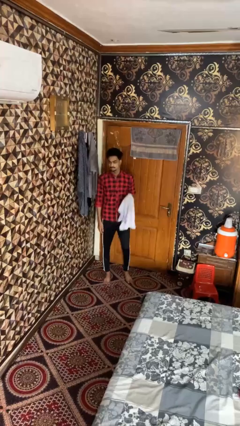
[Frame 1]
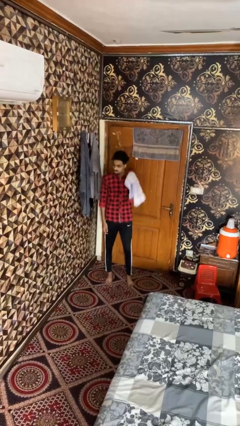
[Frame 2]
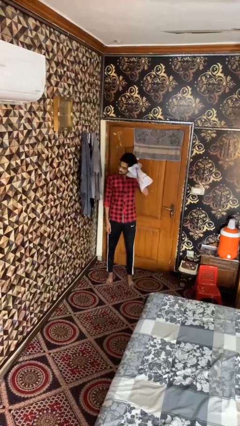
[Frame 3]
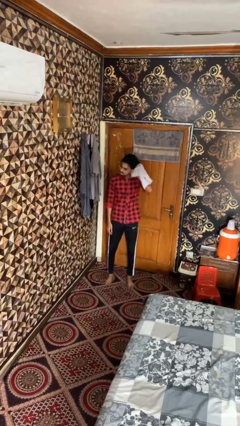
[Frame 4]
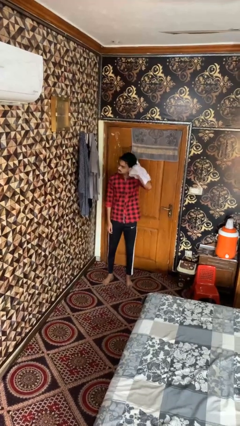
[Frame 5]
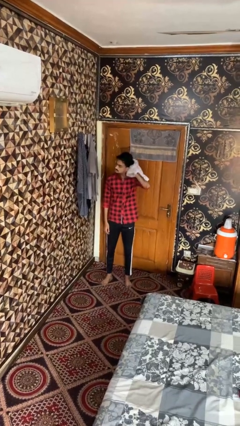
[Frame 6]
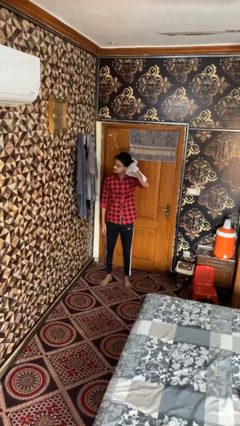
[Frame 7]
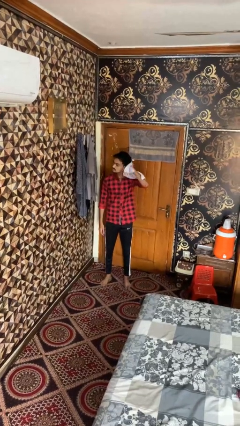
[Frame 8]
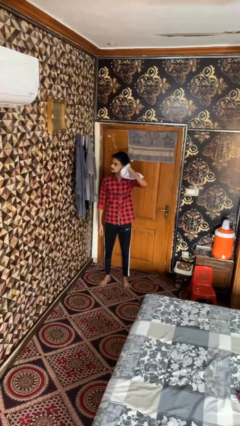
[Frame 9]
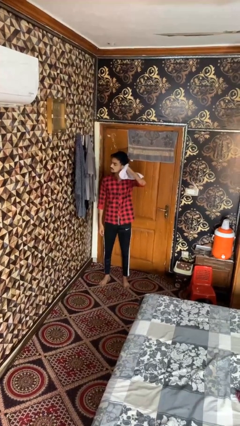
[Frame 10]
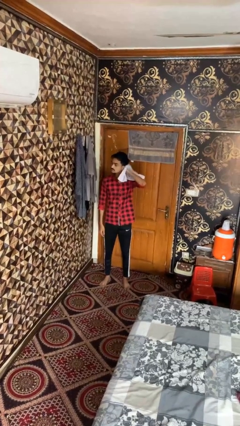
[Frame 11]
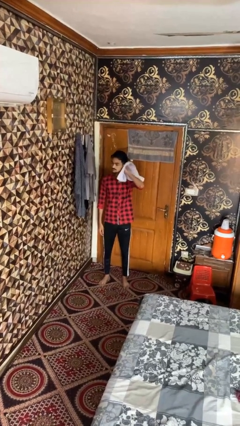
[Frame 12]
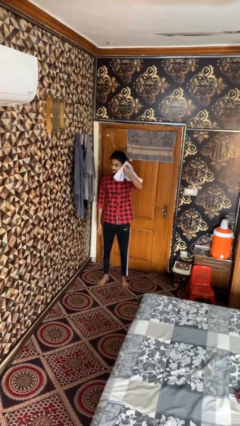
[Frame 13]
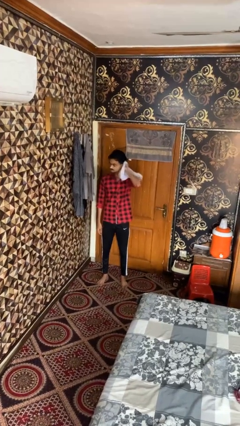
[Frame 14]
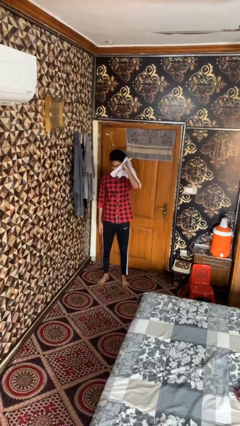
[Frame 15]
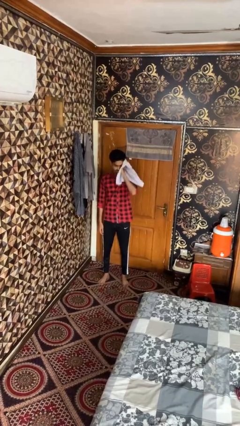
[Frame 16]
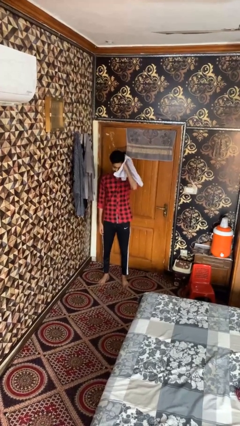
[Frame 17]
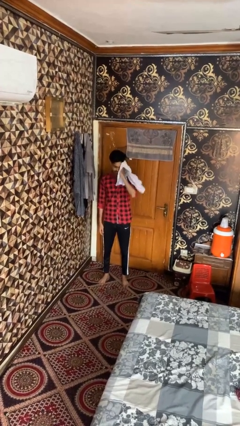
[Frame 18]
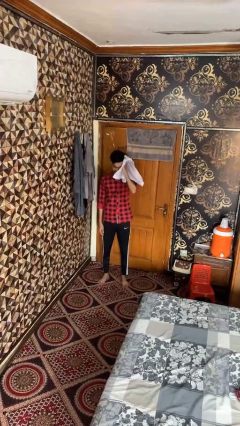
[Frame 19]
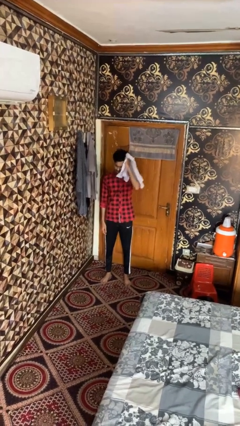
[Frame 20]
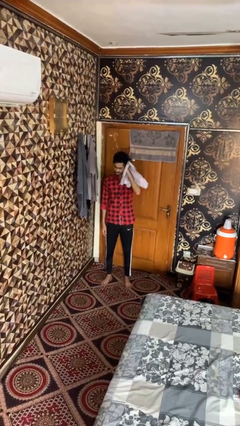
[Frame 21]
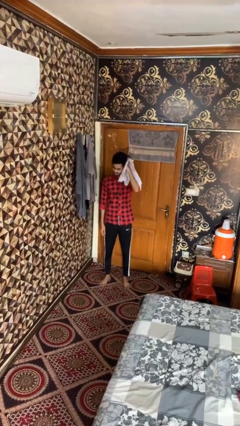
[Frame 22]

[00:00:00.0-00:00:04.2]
person dries hair with towel

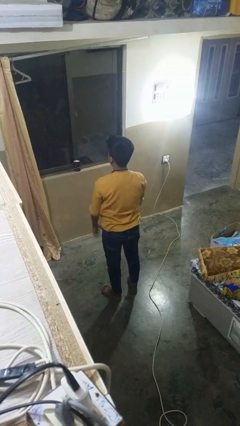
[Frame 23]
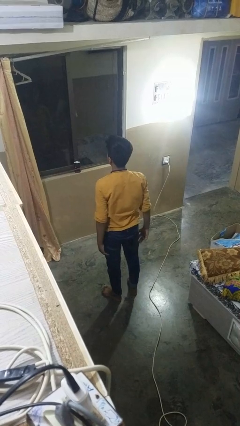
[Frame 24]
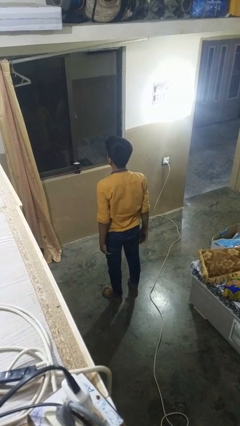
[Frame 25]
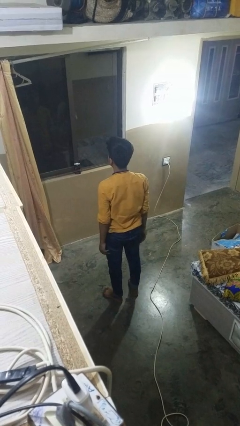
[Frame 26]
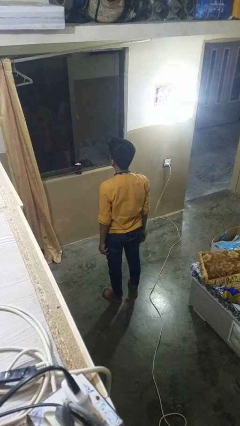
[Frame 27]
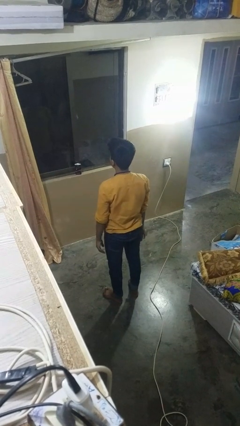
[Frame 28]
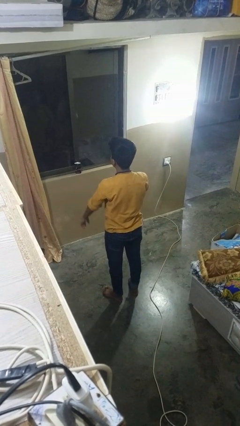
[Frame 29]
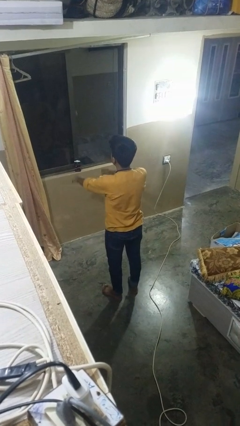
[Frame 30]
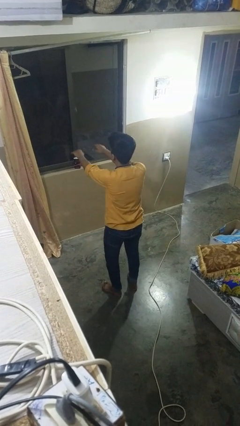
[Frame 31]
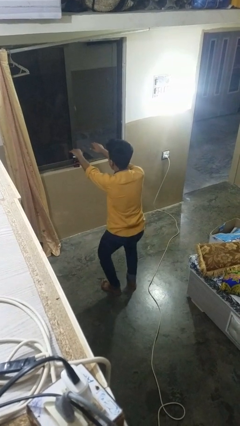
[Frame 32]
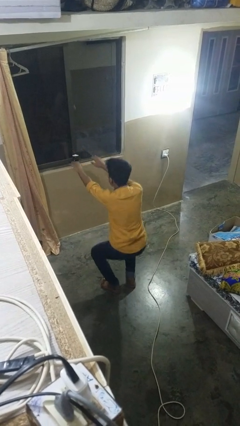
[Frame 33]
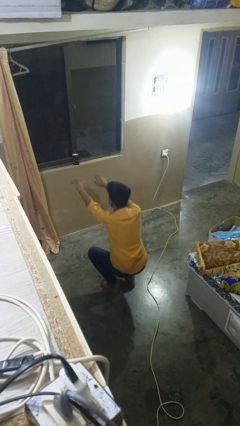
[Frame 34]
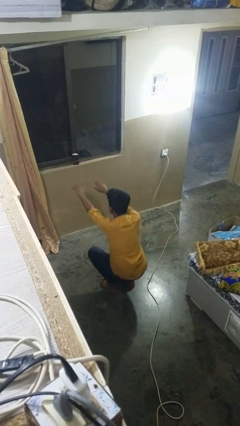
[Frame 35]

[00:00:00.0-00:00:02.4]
person squats

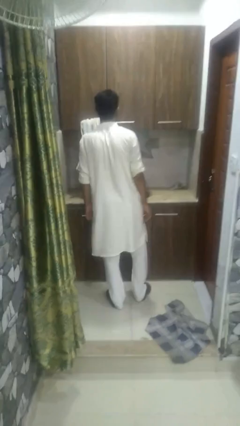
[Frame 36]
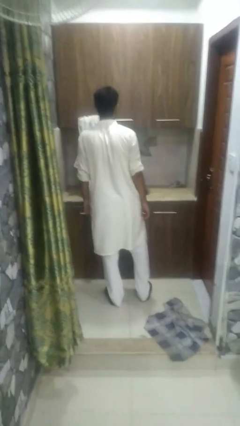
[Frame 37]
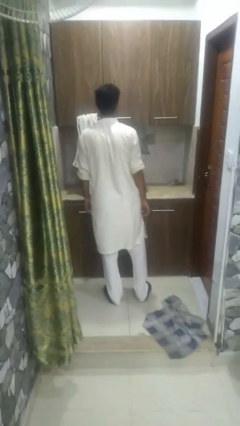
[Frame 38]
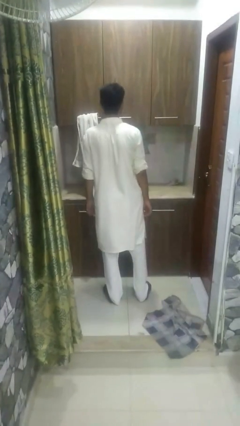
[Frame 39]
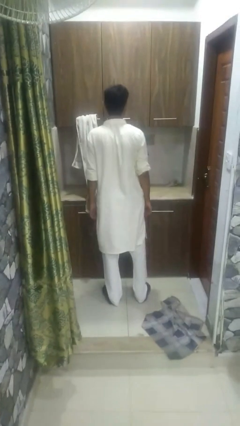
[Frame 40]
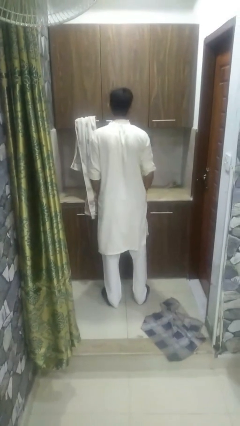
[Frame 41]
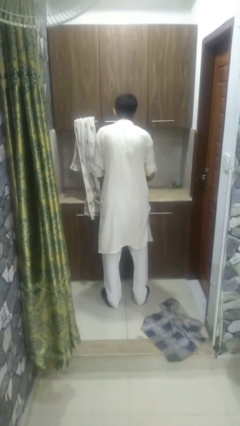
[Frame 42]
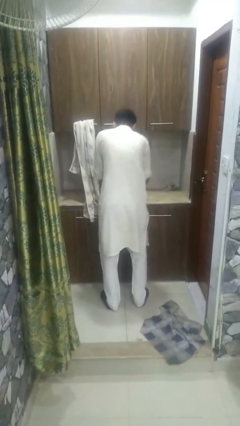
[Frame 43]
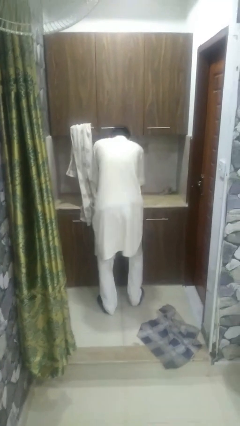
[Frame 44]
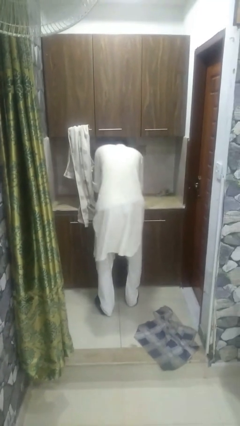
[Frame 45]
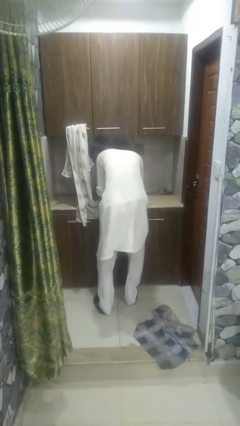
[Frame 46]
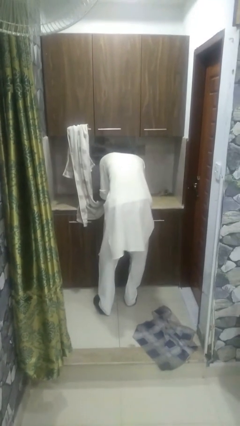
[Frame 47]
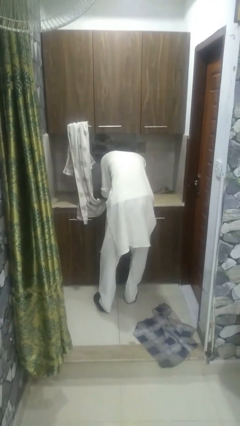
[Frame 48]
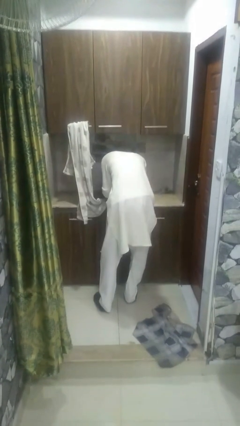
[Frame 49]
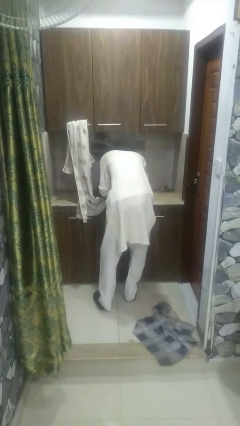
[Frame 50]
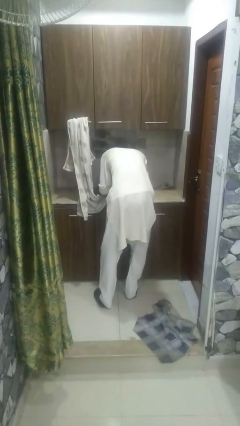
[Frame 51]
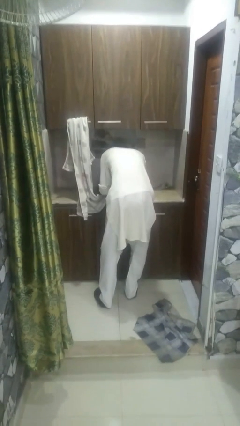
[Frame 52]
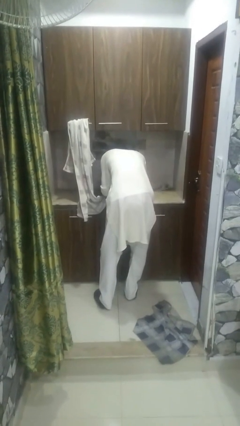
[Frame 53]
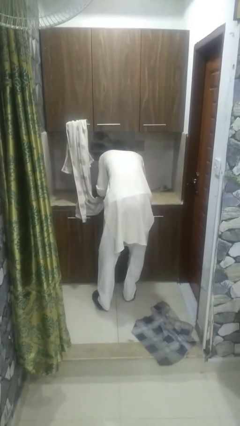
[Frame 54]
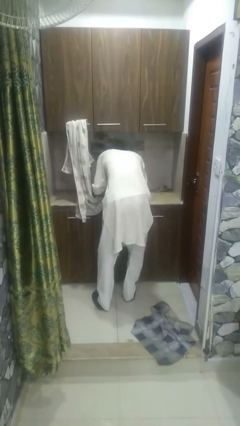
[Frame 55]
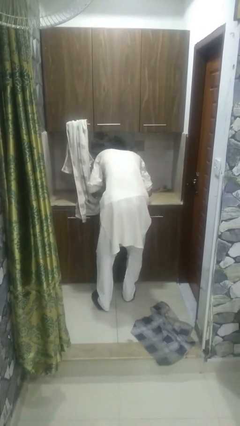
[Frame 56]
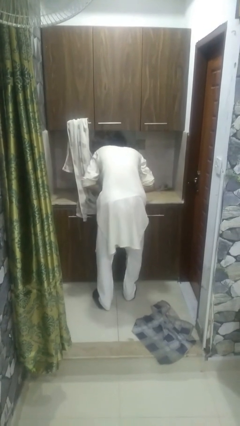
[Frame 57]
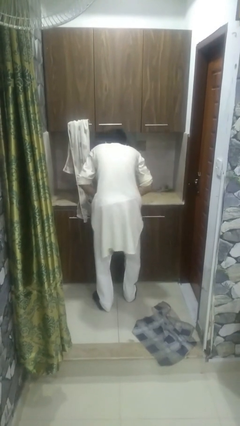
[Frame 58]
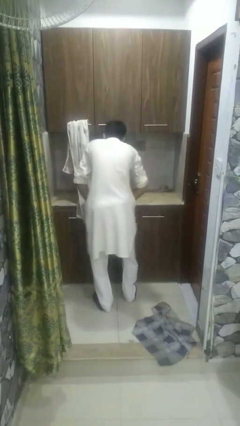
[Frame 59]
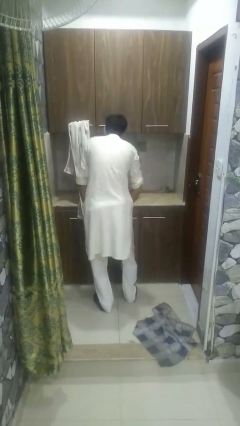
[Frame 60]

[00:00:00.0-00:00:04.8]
person washes face

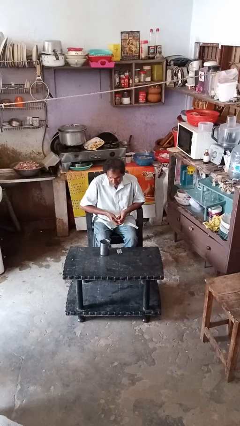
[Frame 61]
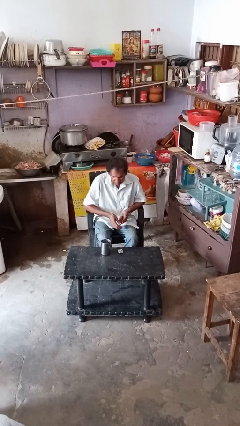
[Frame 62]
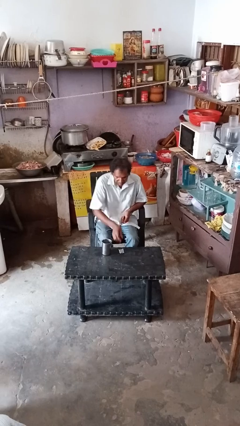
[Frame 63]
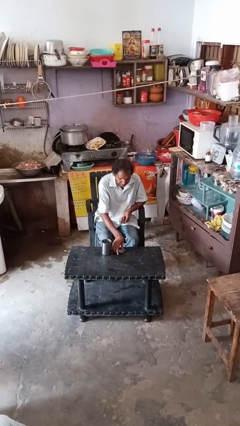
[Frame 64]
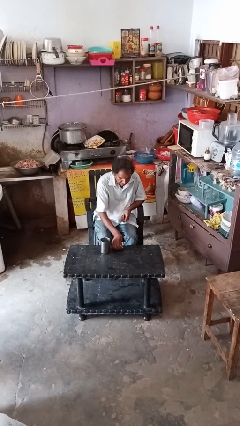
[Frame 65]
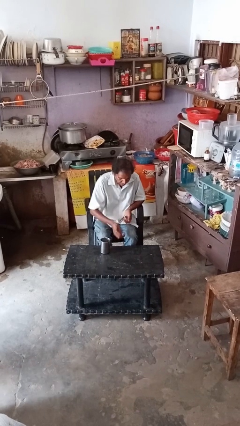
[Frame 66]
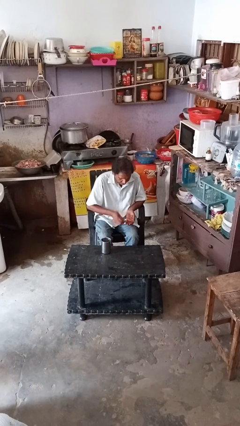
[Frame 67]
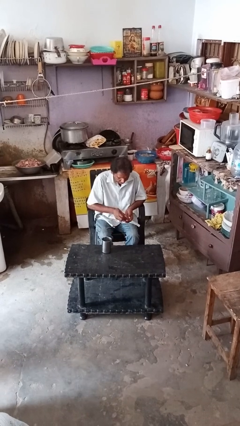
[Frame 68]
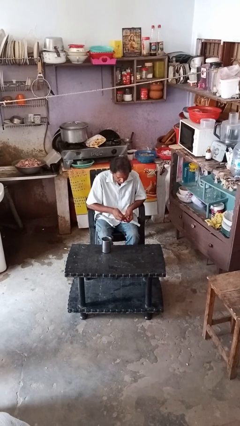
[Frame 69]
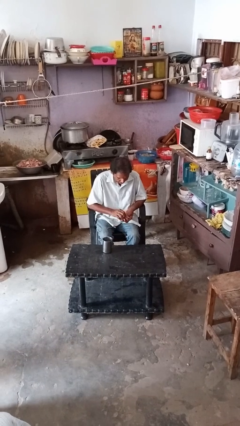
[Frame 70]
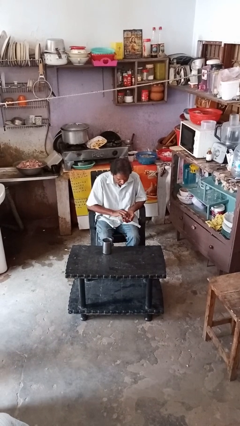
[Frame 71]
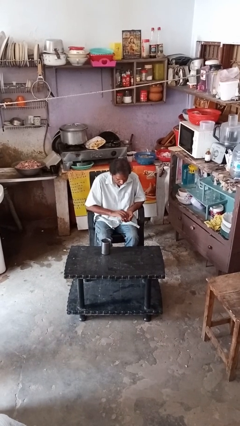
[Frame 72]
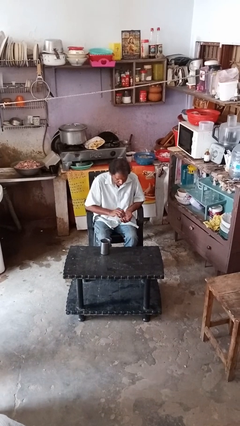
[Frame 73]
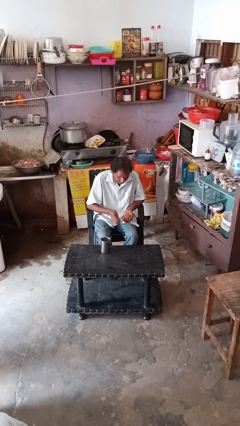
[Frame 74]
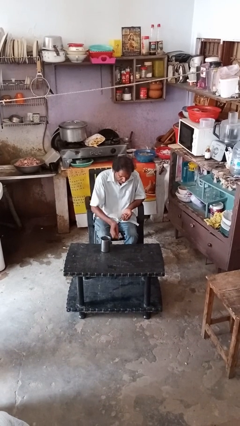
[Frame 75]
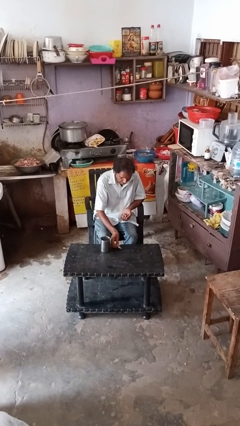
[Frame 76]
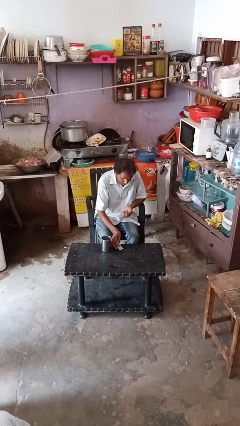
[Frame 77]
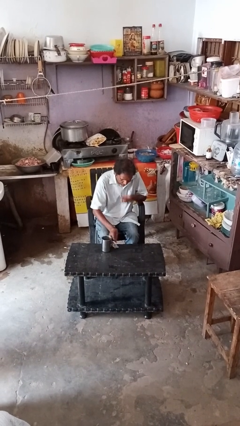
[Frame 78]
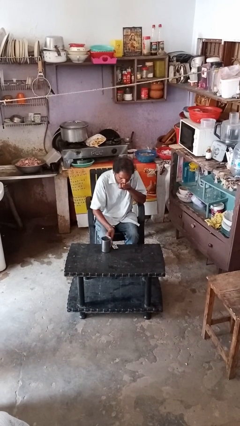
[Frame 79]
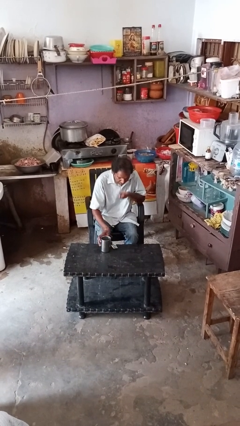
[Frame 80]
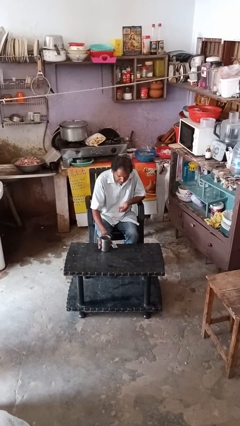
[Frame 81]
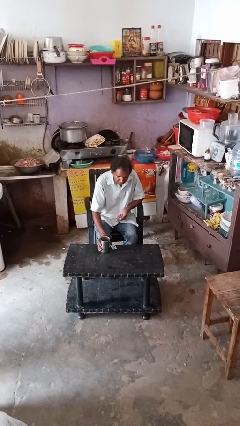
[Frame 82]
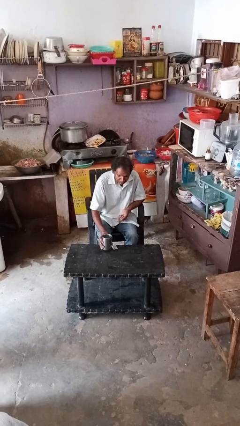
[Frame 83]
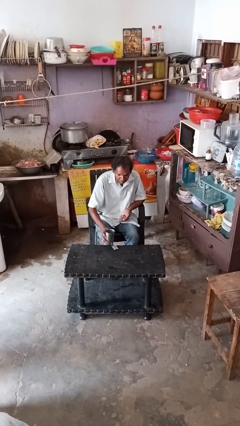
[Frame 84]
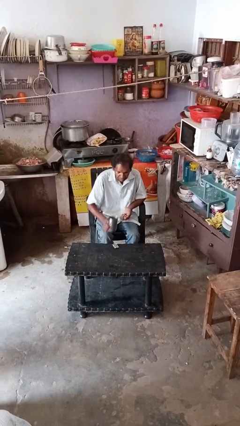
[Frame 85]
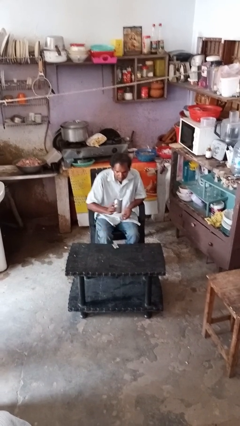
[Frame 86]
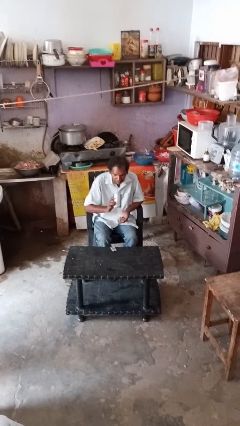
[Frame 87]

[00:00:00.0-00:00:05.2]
person takes medicine pills

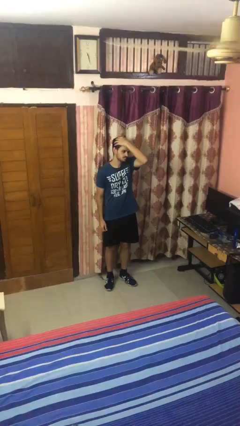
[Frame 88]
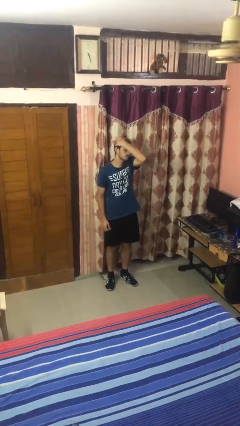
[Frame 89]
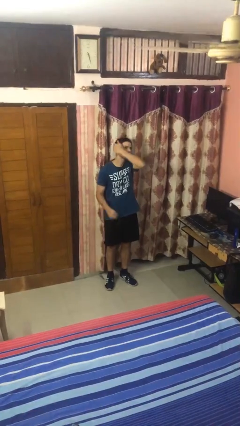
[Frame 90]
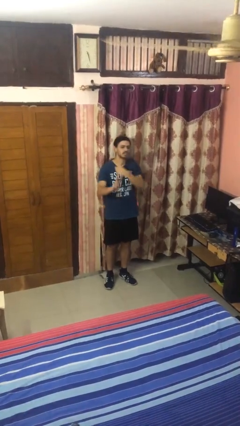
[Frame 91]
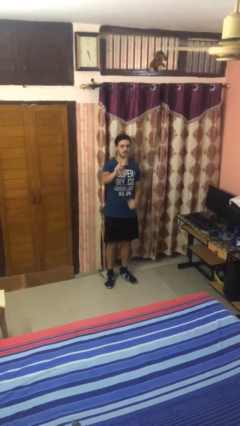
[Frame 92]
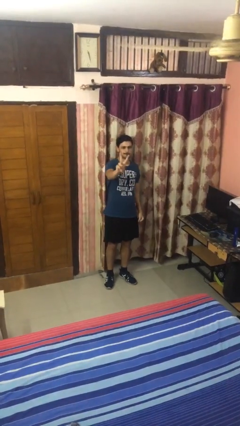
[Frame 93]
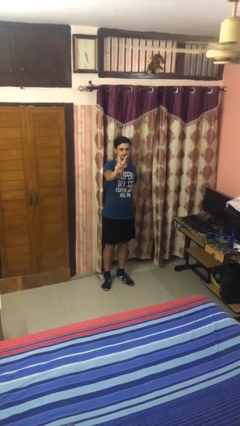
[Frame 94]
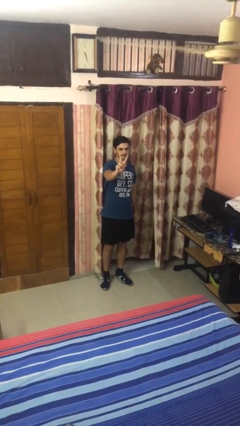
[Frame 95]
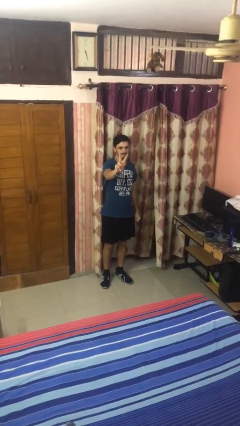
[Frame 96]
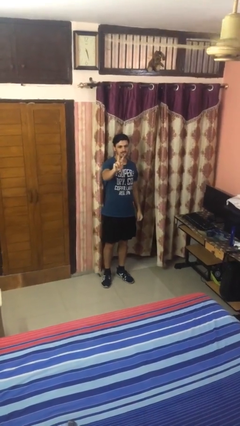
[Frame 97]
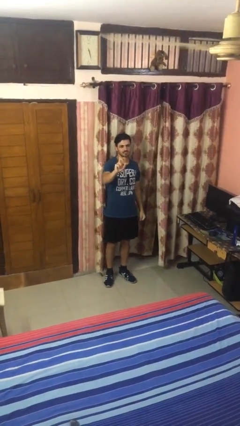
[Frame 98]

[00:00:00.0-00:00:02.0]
person gestures peace
